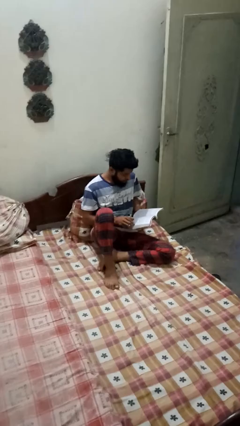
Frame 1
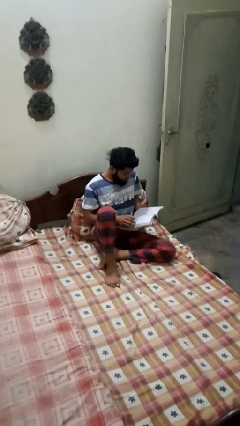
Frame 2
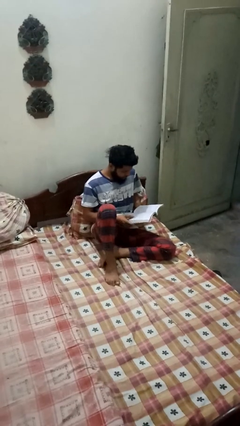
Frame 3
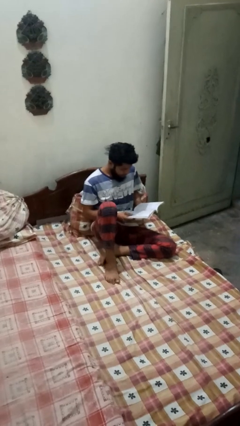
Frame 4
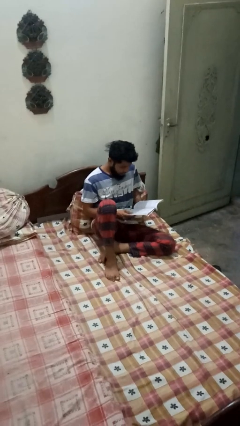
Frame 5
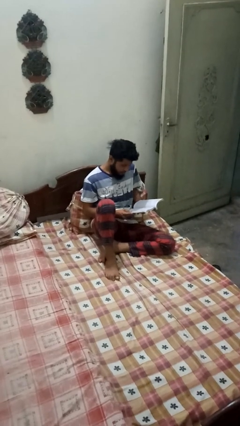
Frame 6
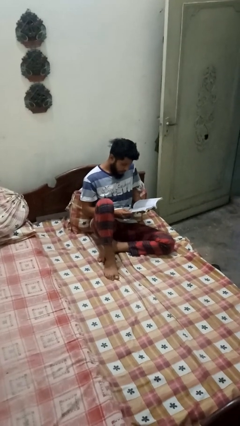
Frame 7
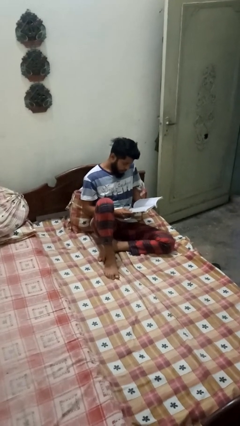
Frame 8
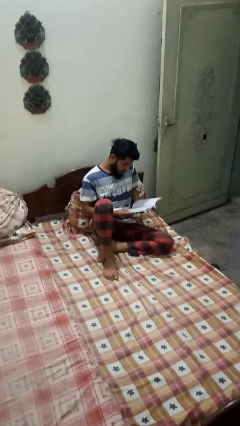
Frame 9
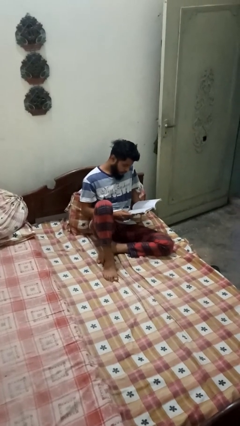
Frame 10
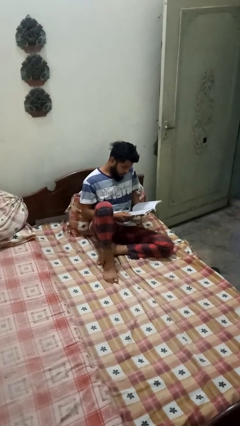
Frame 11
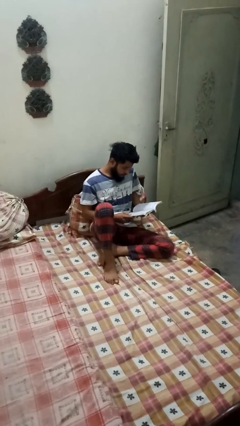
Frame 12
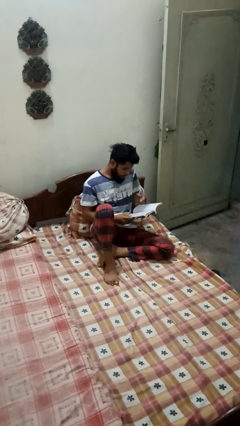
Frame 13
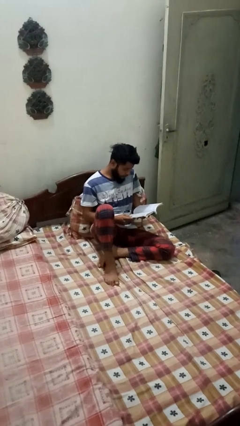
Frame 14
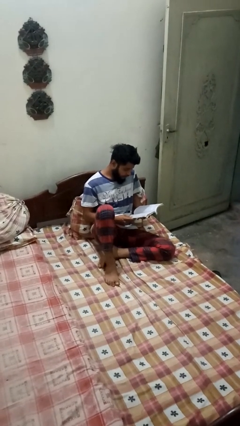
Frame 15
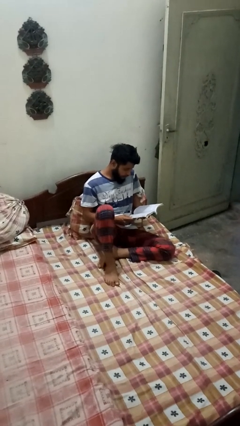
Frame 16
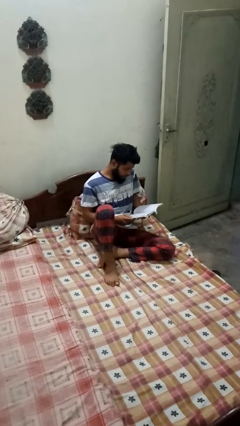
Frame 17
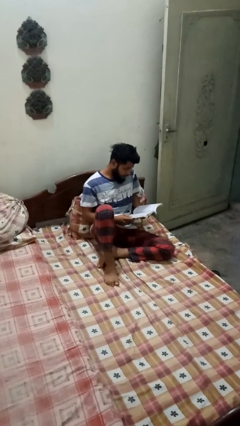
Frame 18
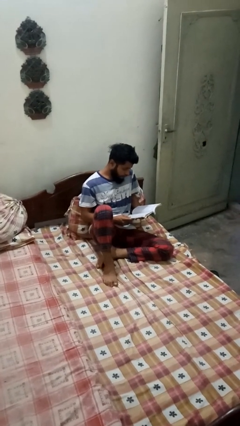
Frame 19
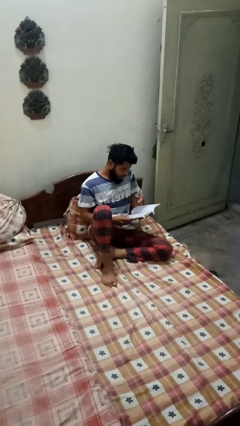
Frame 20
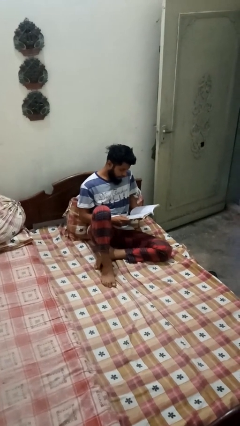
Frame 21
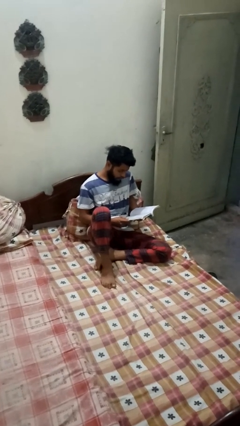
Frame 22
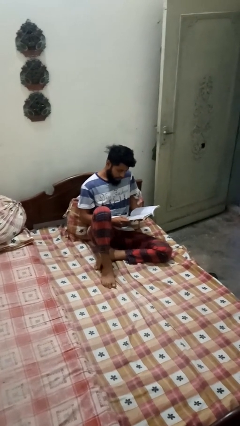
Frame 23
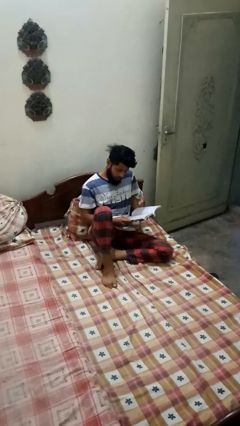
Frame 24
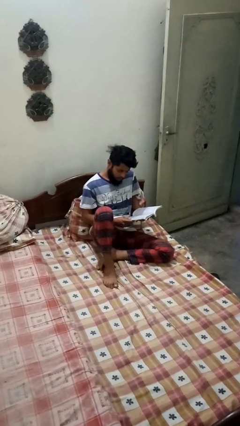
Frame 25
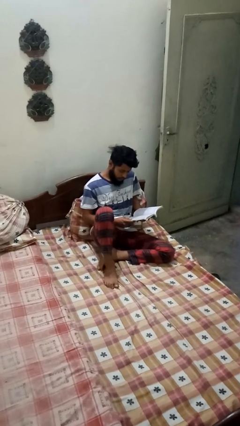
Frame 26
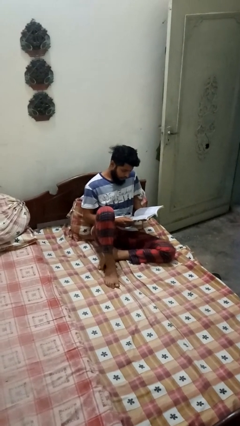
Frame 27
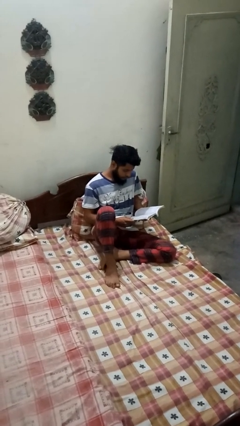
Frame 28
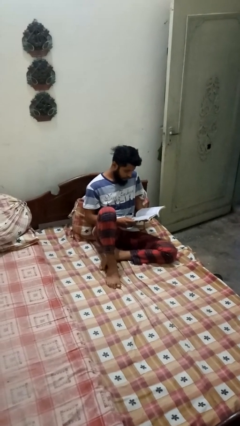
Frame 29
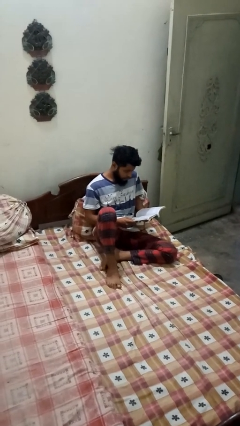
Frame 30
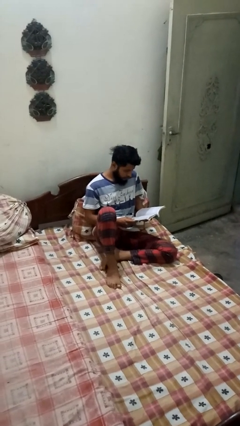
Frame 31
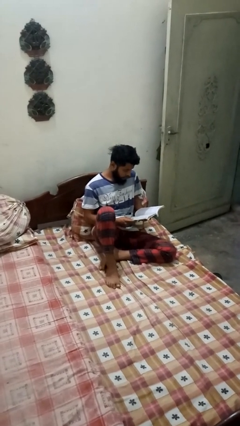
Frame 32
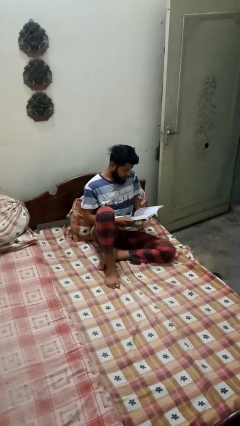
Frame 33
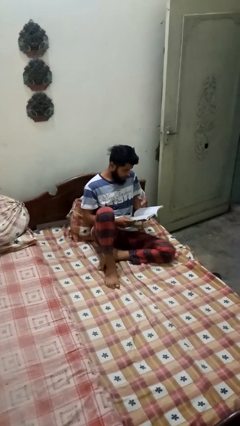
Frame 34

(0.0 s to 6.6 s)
person reads book

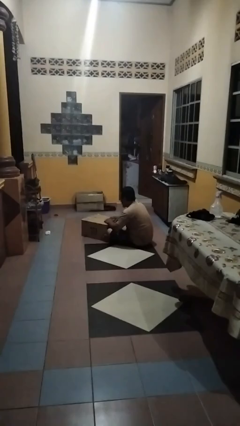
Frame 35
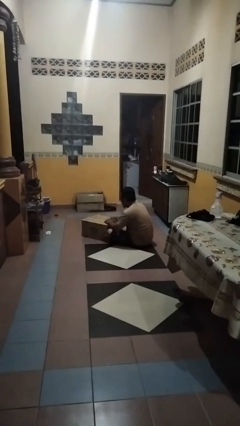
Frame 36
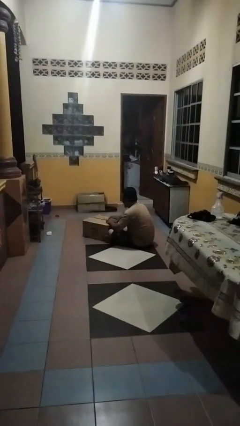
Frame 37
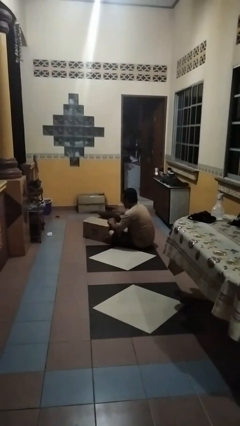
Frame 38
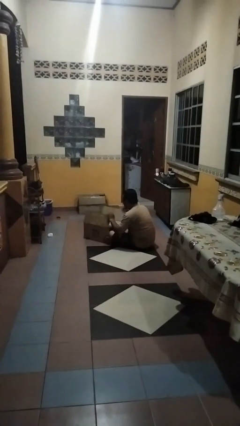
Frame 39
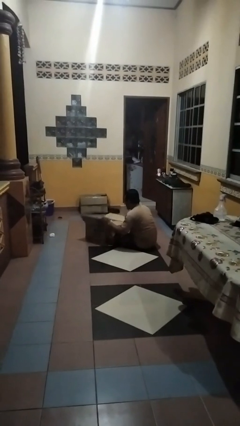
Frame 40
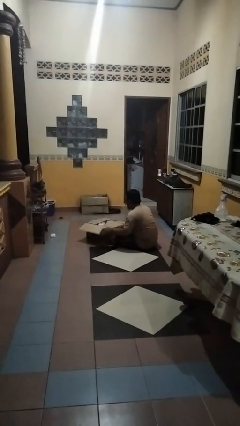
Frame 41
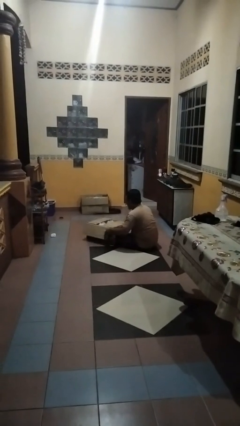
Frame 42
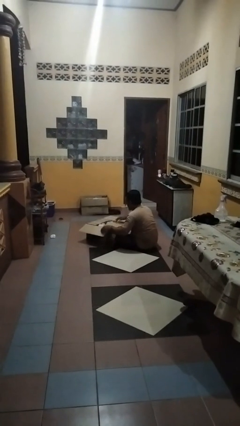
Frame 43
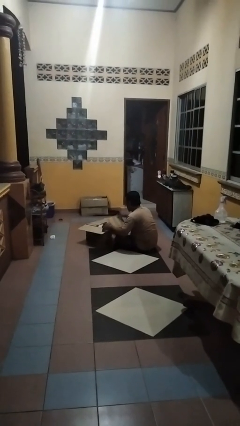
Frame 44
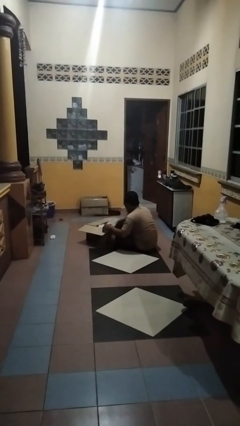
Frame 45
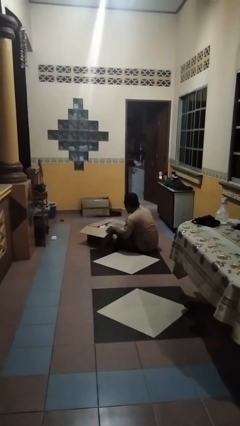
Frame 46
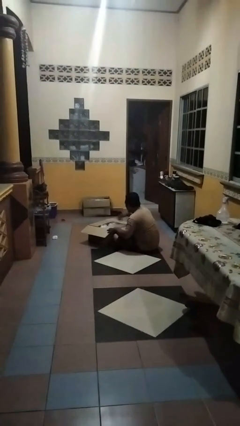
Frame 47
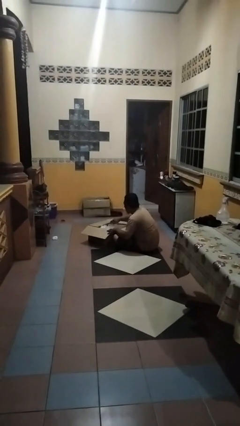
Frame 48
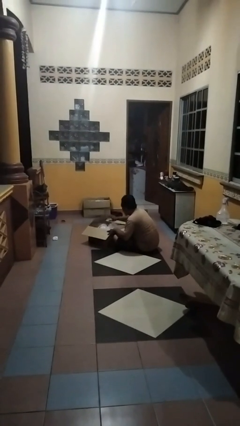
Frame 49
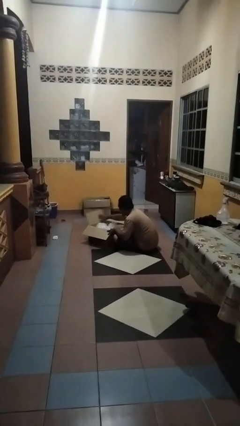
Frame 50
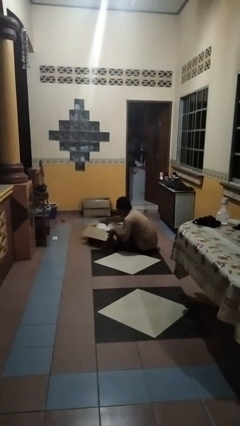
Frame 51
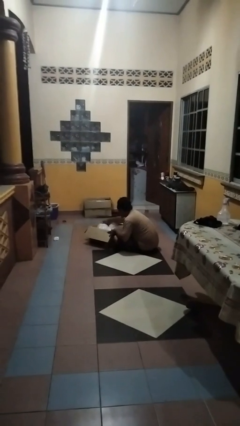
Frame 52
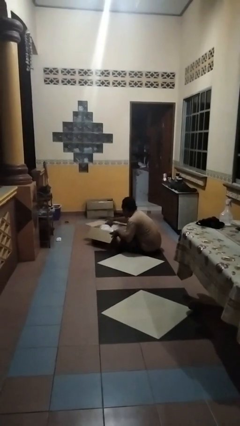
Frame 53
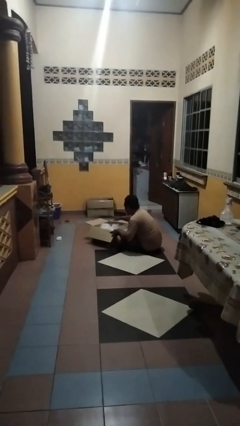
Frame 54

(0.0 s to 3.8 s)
person opens box

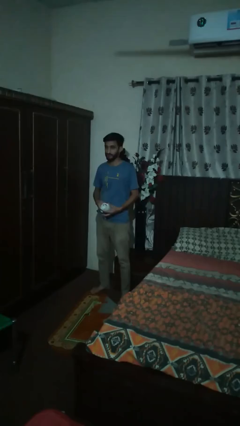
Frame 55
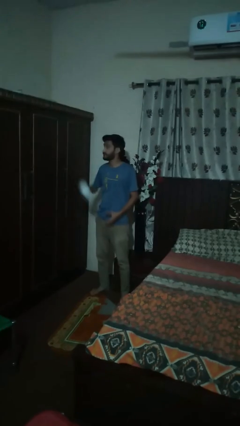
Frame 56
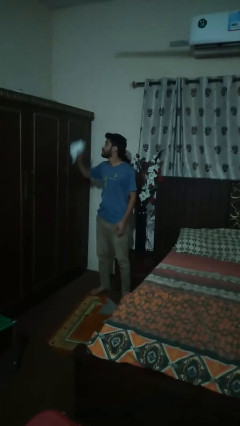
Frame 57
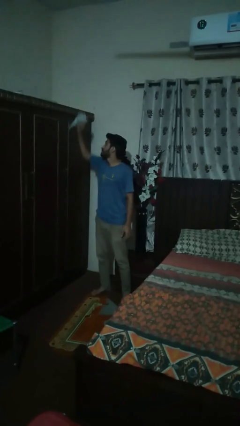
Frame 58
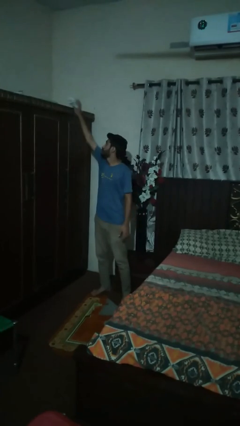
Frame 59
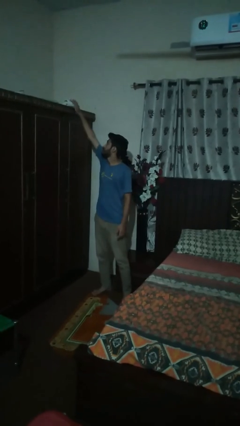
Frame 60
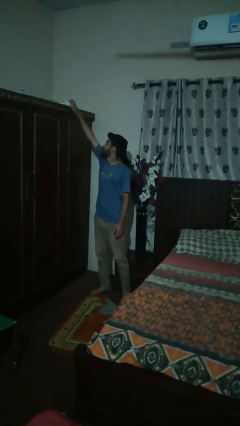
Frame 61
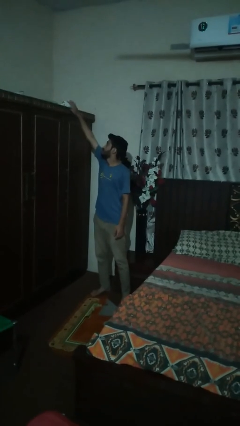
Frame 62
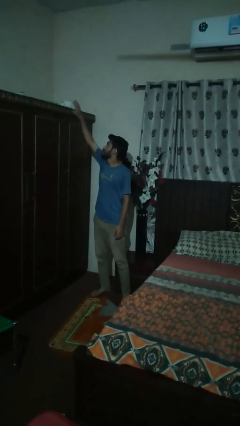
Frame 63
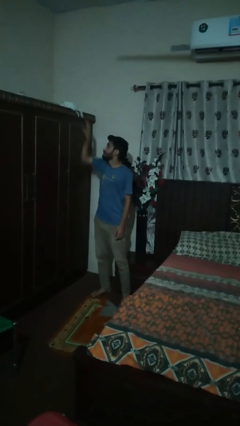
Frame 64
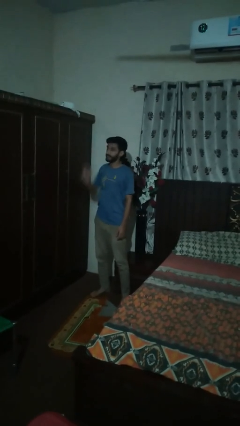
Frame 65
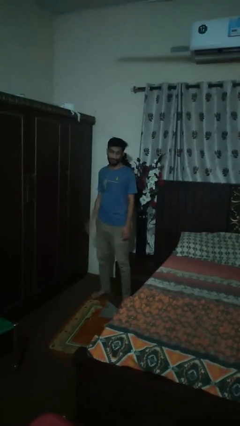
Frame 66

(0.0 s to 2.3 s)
person picks up object from shelf

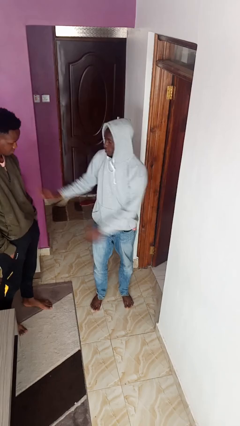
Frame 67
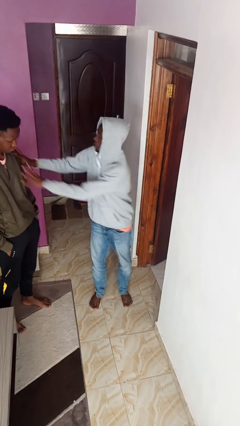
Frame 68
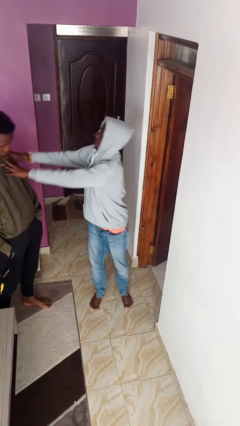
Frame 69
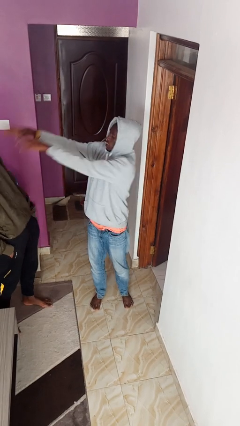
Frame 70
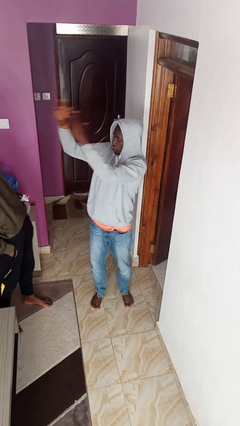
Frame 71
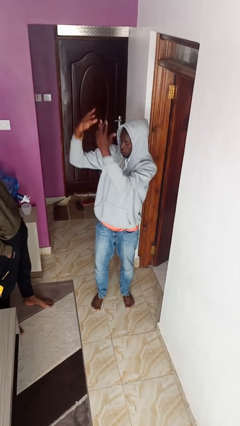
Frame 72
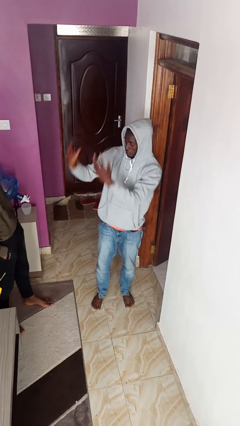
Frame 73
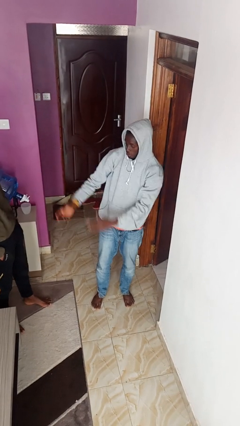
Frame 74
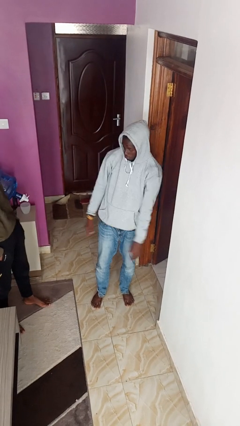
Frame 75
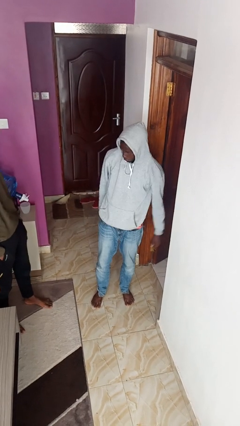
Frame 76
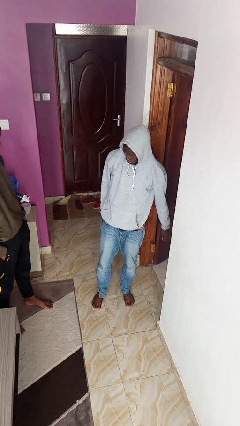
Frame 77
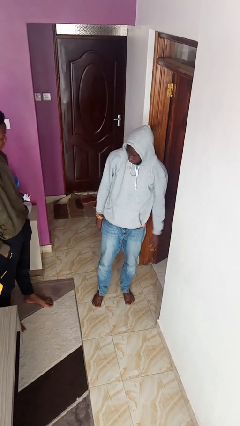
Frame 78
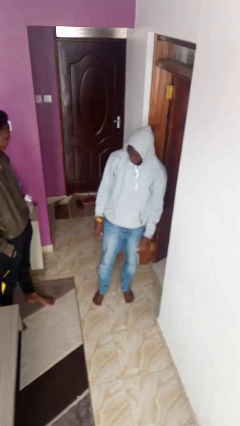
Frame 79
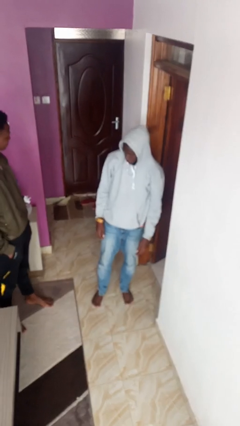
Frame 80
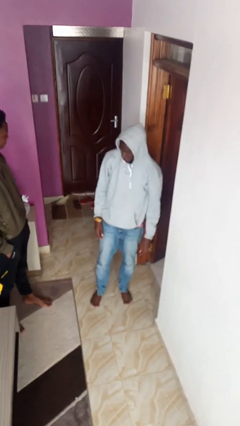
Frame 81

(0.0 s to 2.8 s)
person shoves person

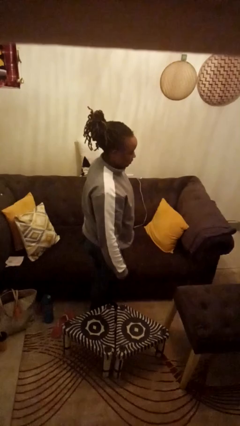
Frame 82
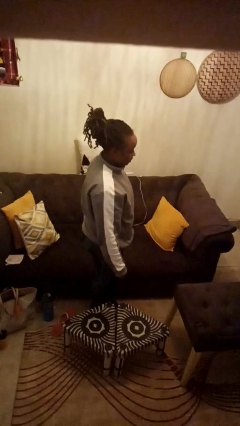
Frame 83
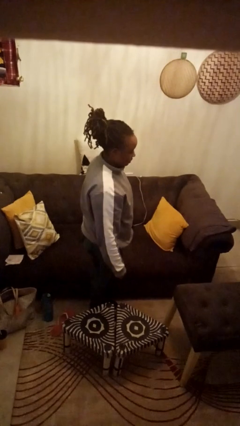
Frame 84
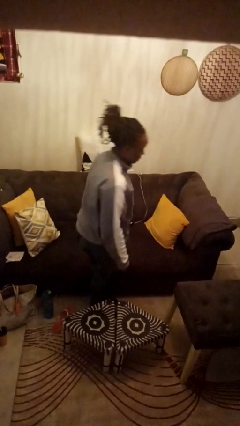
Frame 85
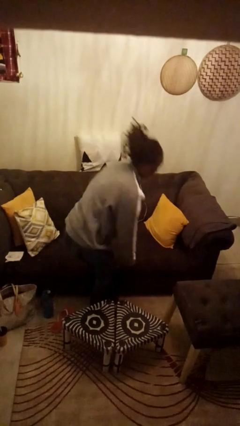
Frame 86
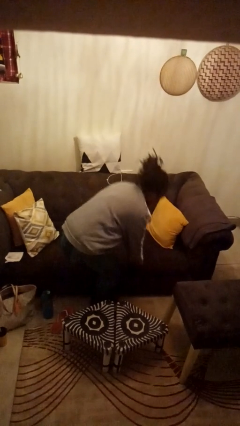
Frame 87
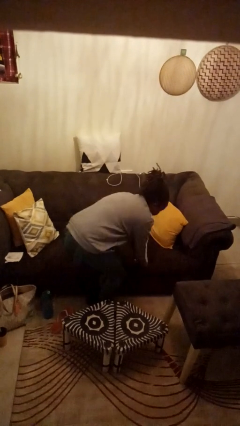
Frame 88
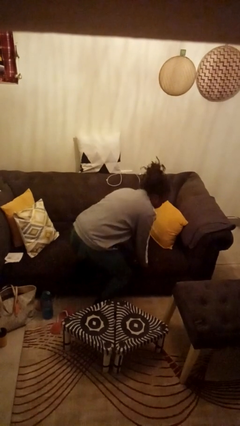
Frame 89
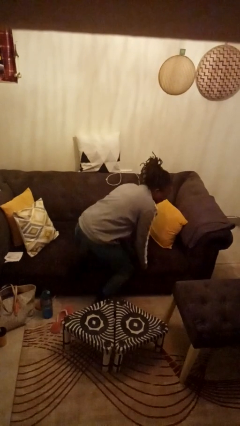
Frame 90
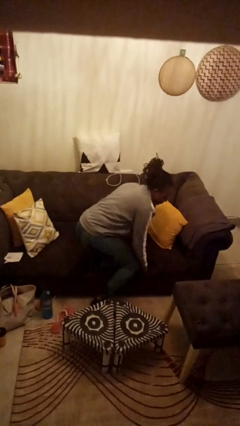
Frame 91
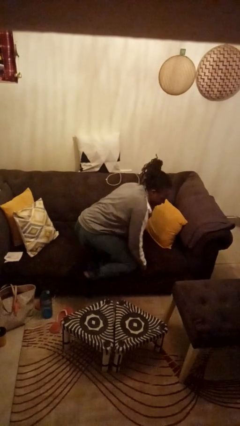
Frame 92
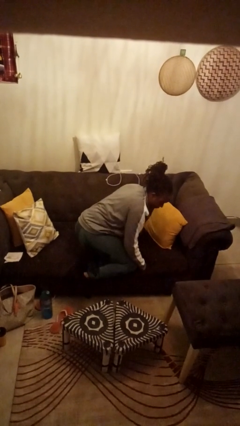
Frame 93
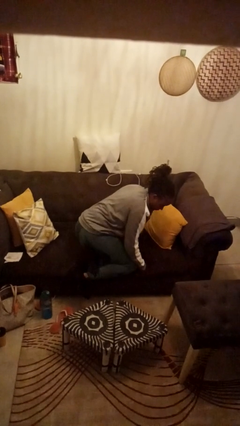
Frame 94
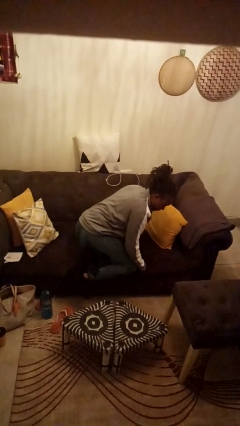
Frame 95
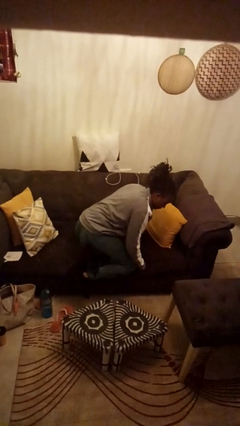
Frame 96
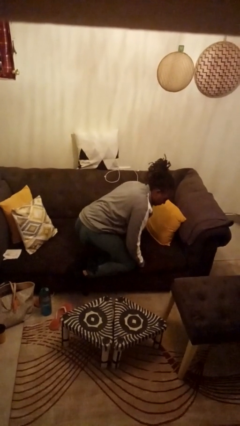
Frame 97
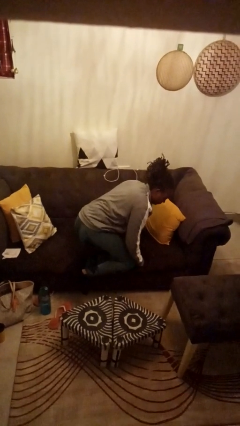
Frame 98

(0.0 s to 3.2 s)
person climbs on couch
